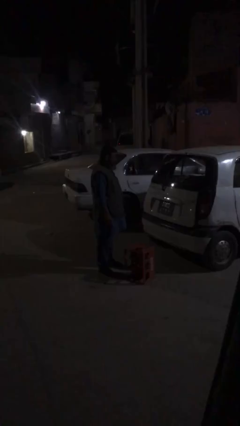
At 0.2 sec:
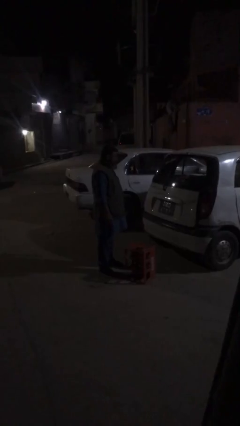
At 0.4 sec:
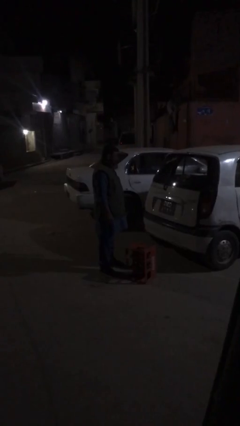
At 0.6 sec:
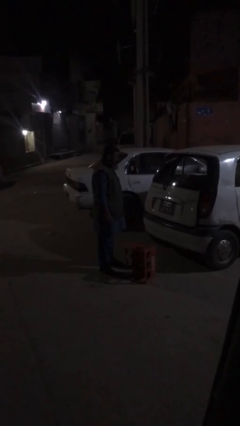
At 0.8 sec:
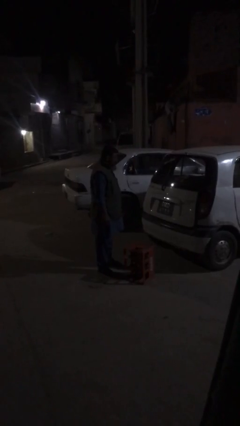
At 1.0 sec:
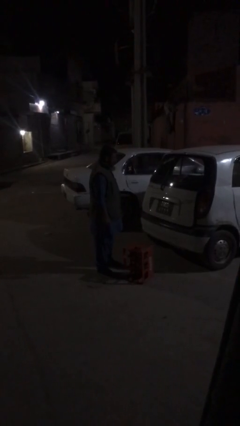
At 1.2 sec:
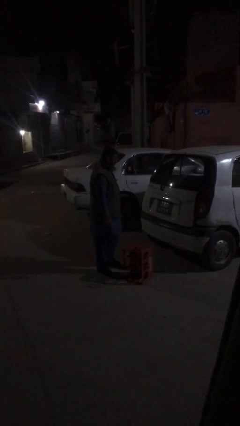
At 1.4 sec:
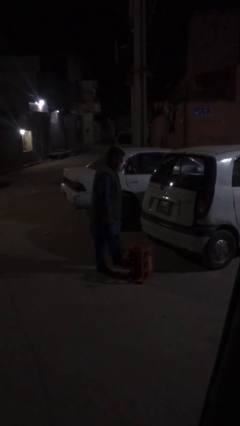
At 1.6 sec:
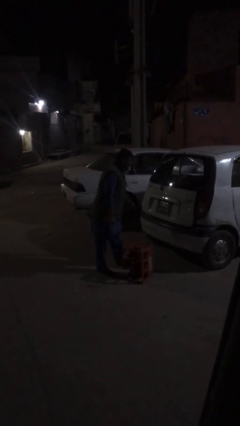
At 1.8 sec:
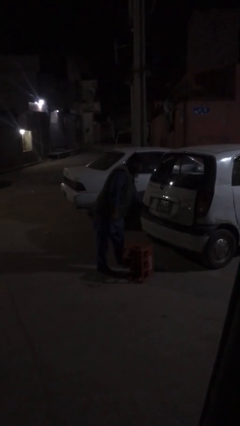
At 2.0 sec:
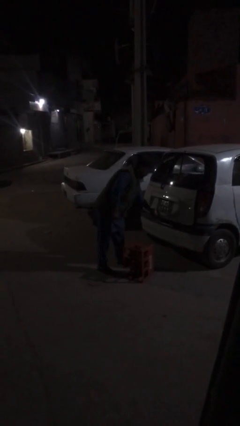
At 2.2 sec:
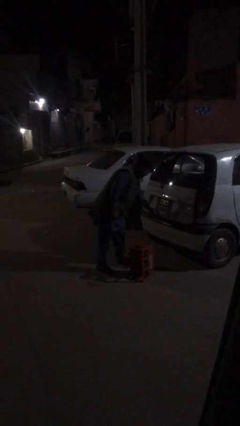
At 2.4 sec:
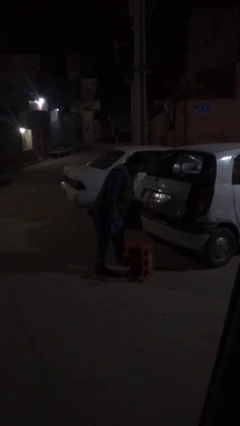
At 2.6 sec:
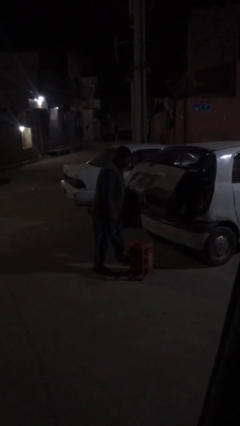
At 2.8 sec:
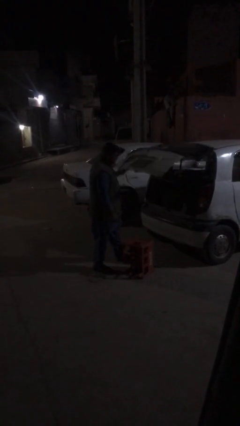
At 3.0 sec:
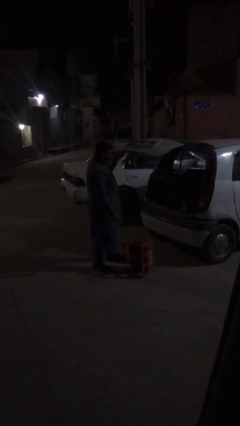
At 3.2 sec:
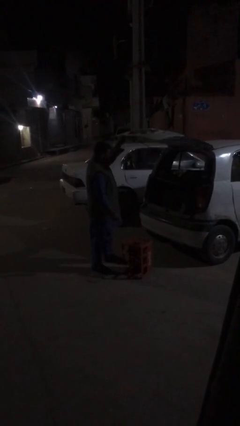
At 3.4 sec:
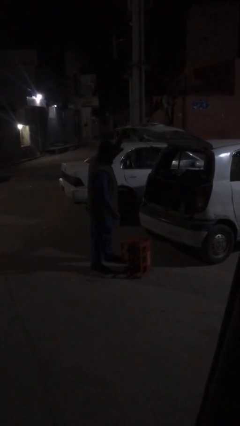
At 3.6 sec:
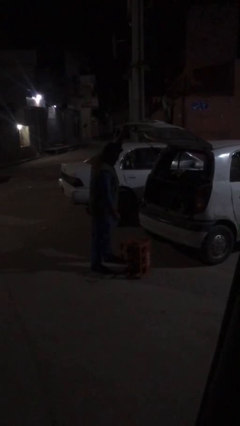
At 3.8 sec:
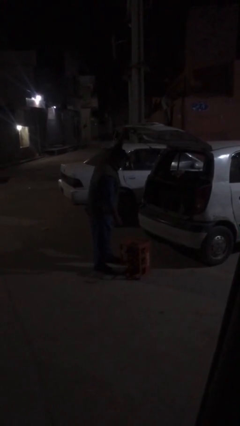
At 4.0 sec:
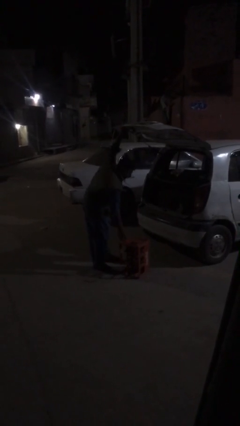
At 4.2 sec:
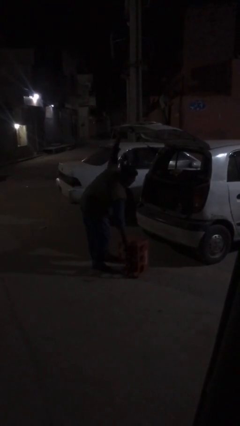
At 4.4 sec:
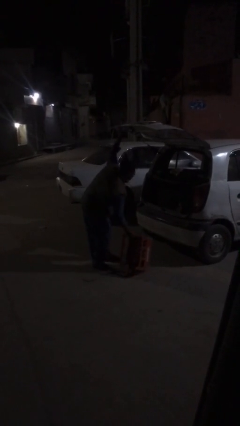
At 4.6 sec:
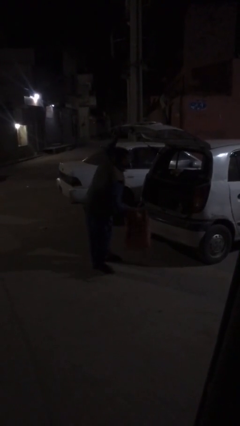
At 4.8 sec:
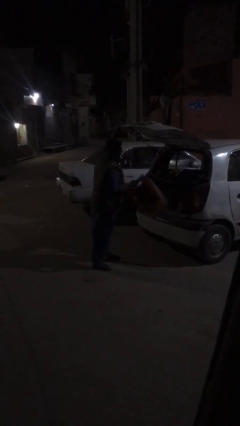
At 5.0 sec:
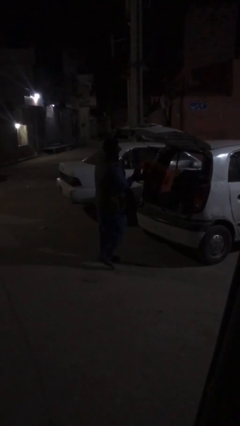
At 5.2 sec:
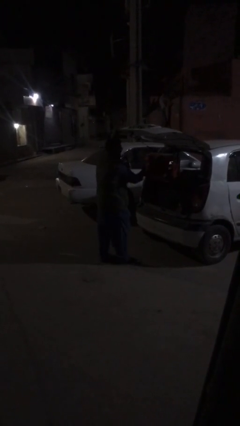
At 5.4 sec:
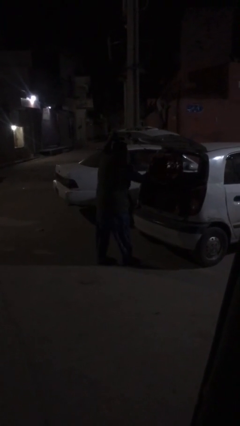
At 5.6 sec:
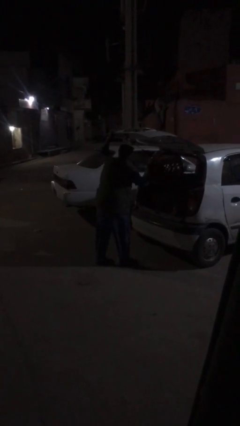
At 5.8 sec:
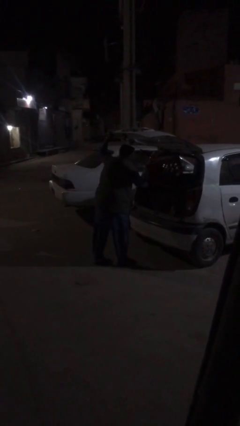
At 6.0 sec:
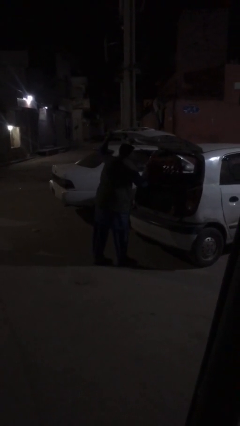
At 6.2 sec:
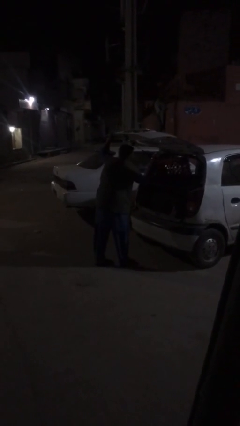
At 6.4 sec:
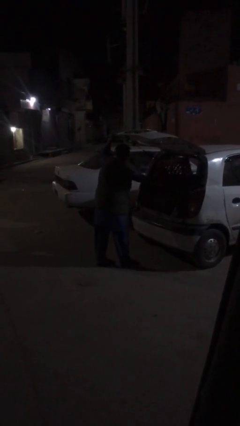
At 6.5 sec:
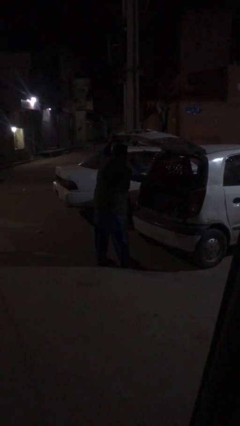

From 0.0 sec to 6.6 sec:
person loads car

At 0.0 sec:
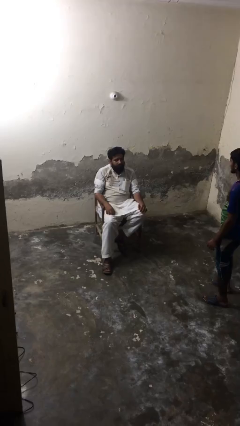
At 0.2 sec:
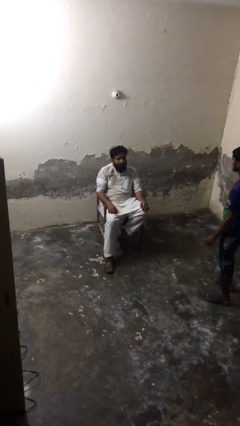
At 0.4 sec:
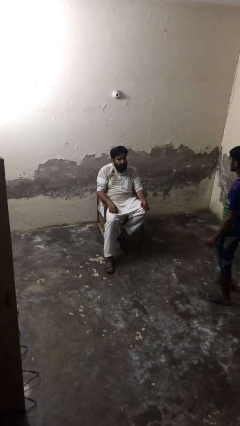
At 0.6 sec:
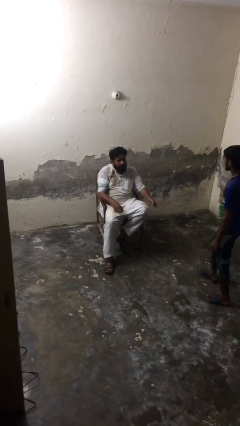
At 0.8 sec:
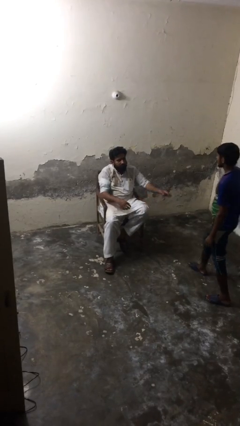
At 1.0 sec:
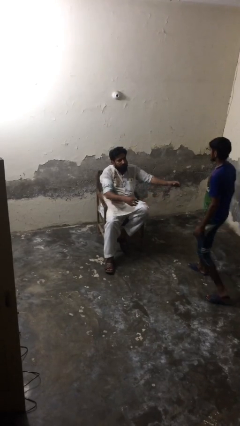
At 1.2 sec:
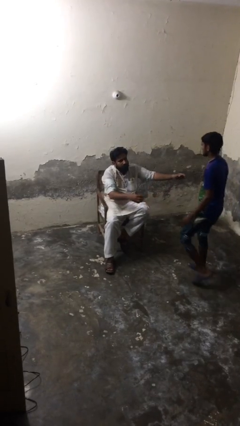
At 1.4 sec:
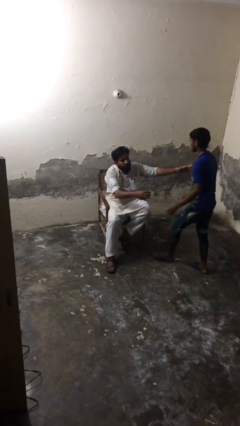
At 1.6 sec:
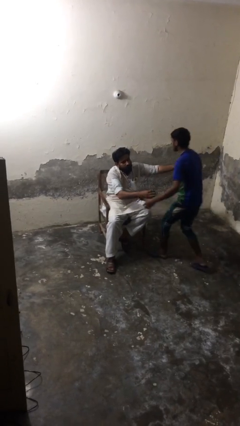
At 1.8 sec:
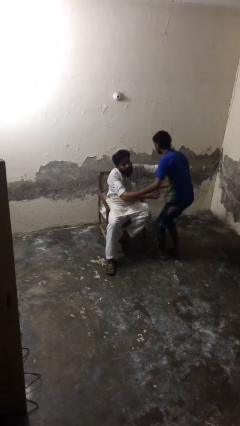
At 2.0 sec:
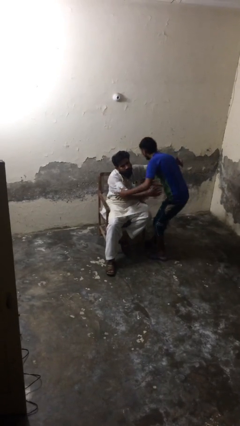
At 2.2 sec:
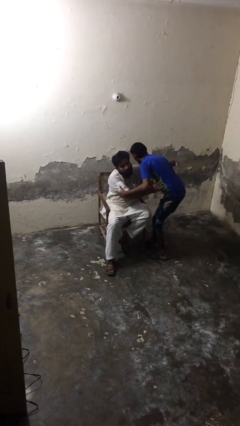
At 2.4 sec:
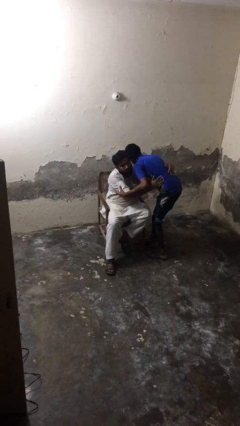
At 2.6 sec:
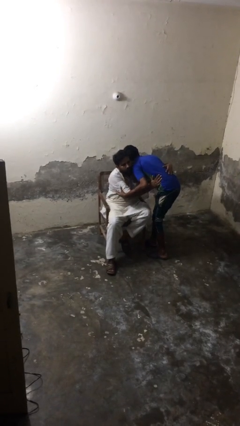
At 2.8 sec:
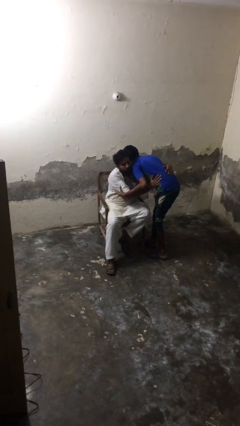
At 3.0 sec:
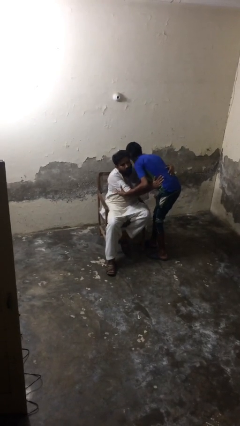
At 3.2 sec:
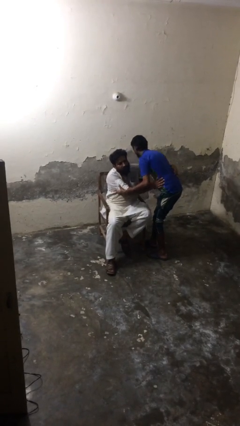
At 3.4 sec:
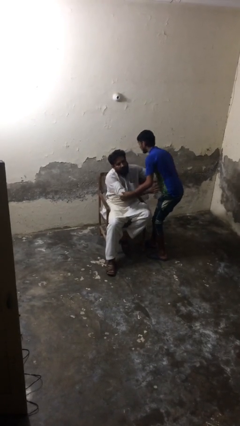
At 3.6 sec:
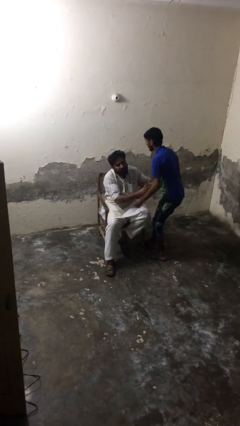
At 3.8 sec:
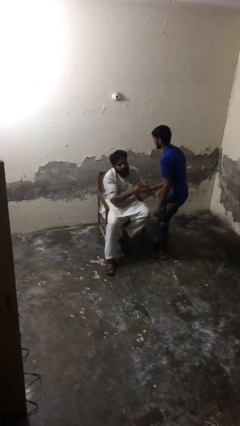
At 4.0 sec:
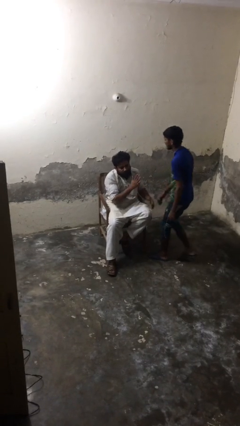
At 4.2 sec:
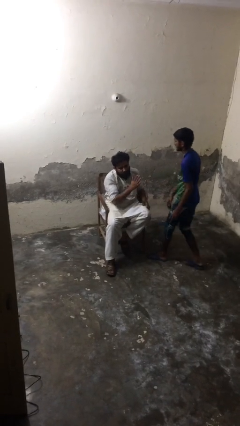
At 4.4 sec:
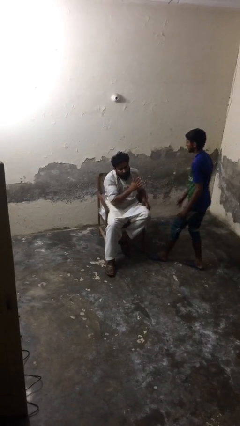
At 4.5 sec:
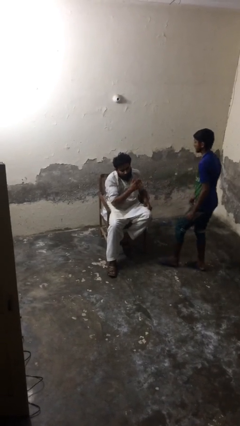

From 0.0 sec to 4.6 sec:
person embraces person

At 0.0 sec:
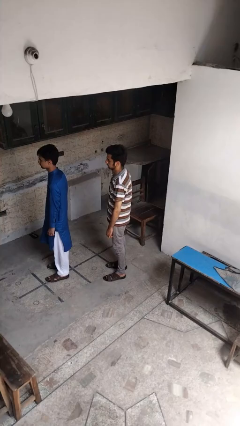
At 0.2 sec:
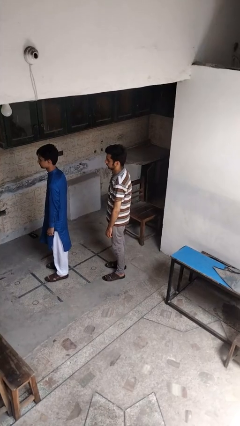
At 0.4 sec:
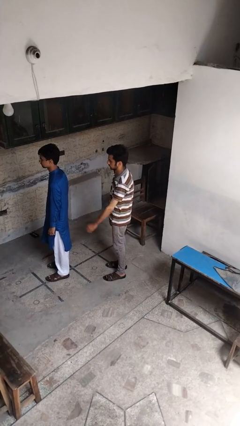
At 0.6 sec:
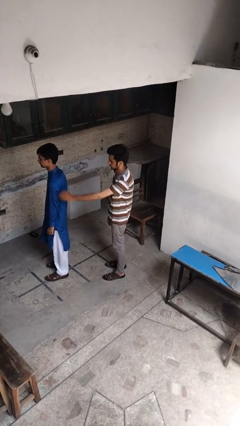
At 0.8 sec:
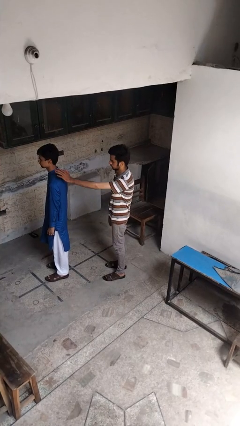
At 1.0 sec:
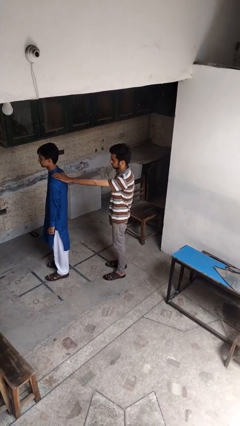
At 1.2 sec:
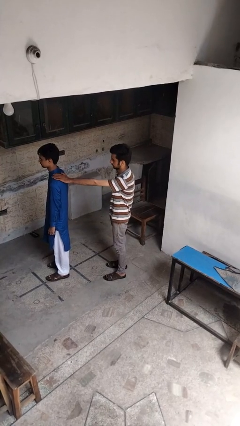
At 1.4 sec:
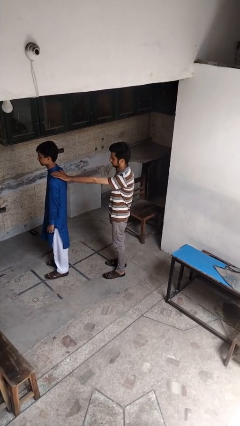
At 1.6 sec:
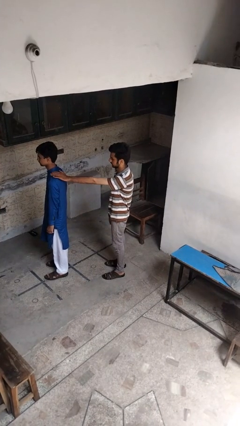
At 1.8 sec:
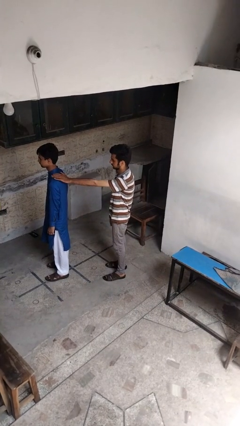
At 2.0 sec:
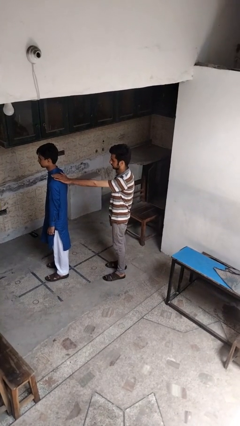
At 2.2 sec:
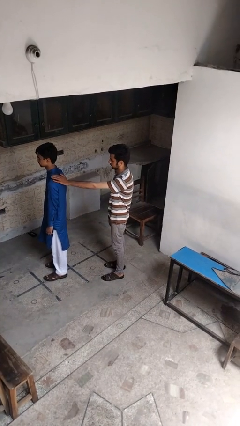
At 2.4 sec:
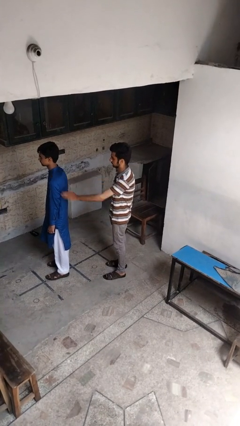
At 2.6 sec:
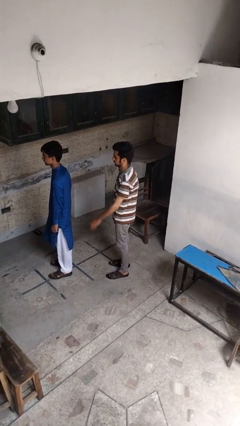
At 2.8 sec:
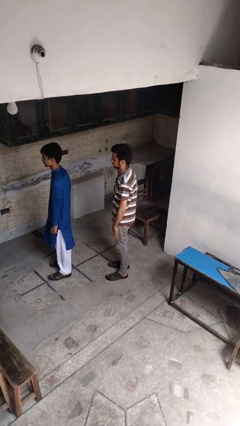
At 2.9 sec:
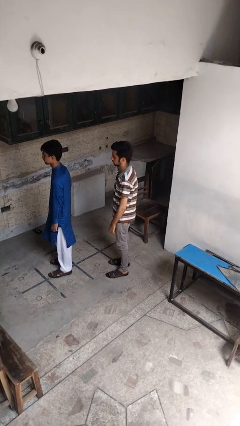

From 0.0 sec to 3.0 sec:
person touches back of person

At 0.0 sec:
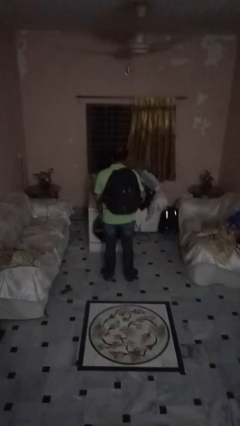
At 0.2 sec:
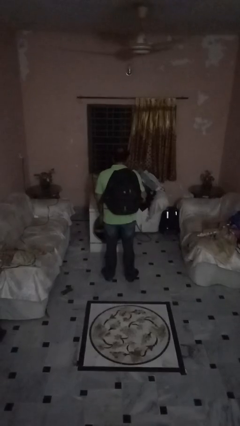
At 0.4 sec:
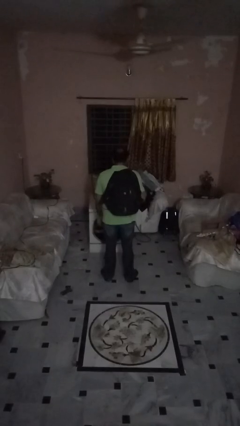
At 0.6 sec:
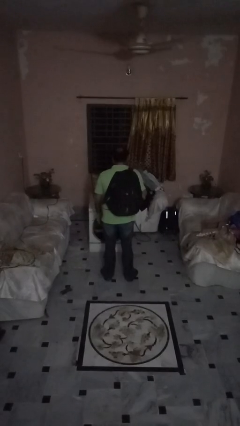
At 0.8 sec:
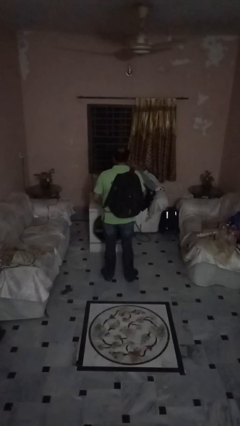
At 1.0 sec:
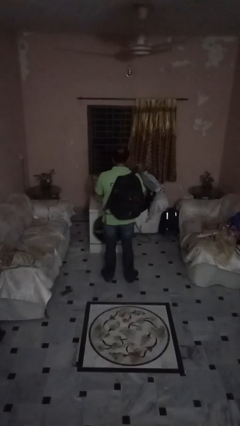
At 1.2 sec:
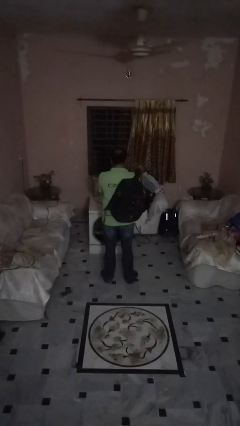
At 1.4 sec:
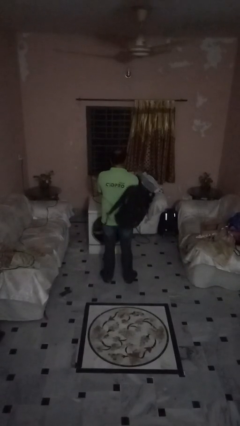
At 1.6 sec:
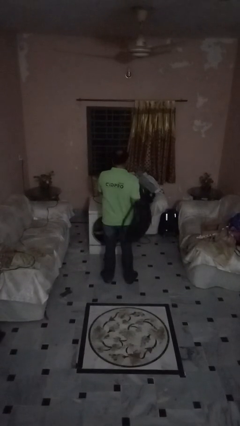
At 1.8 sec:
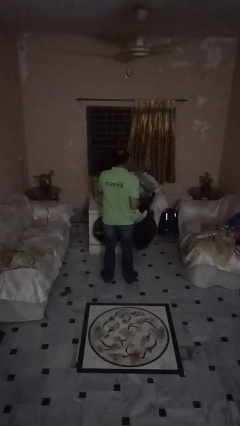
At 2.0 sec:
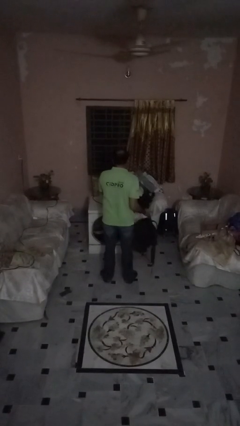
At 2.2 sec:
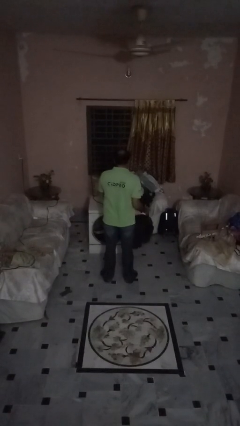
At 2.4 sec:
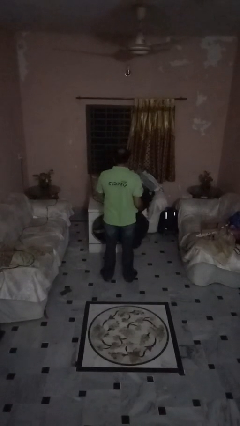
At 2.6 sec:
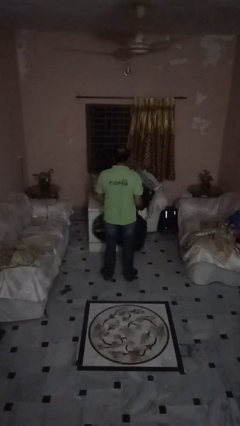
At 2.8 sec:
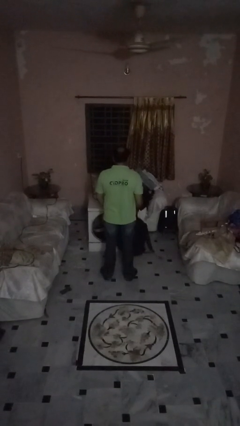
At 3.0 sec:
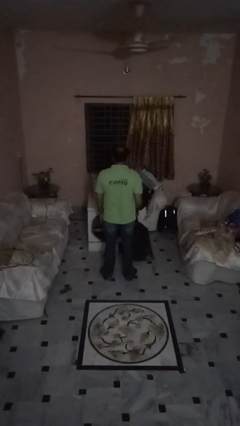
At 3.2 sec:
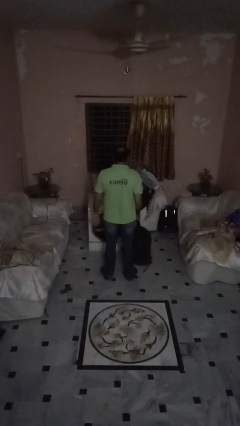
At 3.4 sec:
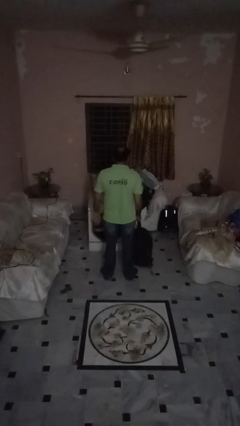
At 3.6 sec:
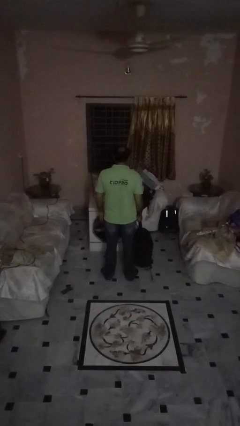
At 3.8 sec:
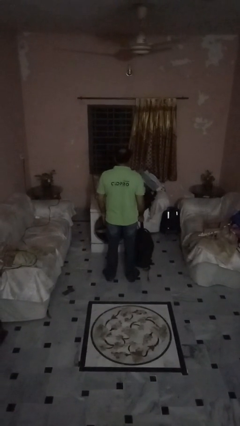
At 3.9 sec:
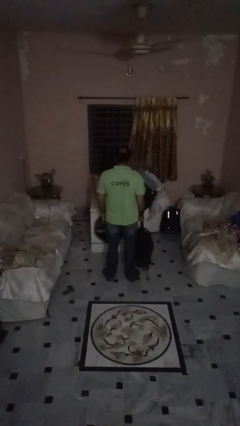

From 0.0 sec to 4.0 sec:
person takes off backpack
